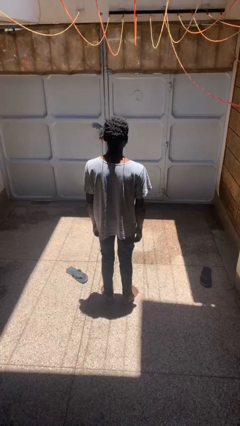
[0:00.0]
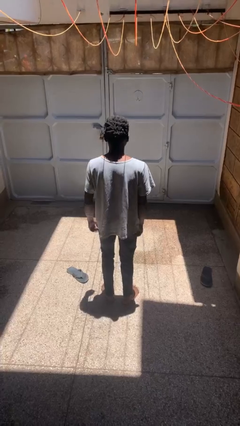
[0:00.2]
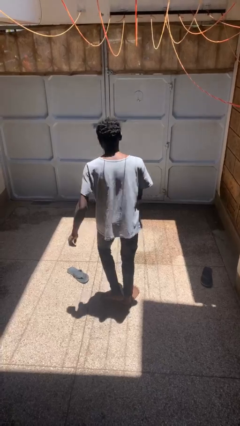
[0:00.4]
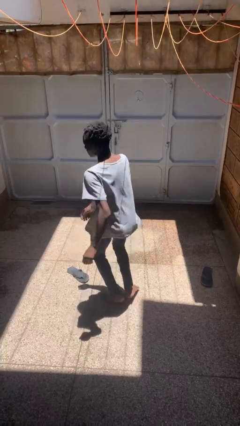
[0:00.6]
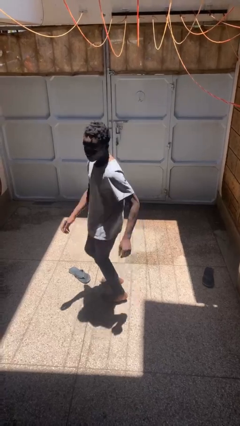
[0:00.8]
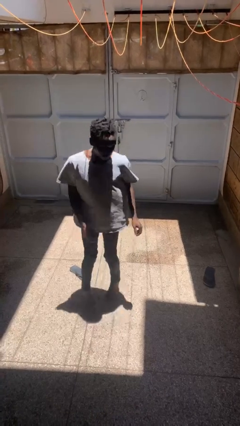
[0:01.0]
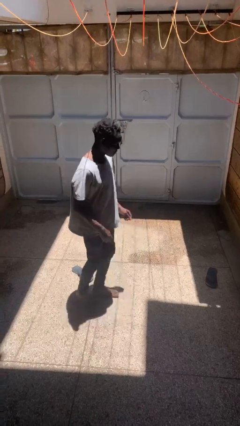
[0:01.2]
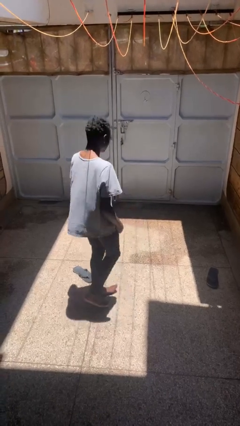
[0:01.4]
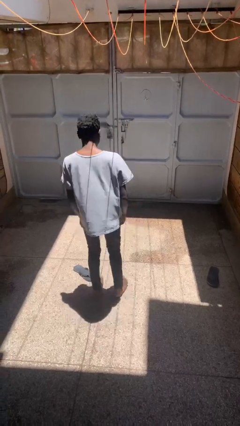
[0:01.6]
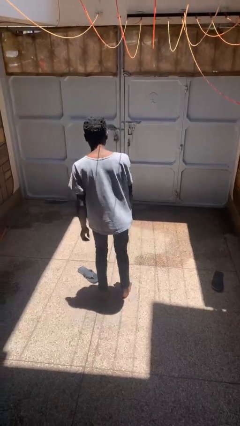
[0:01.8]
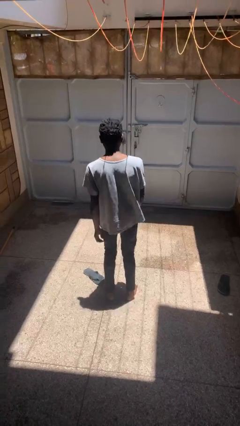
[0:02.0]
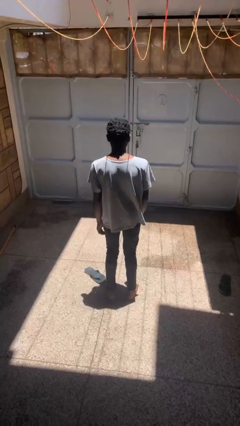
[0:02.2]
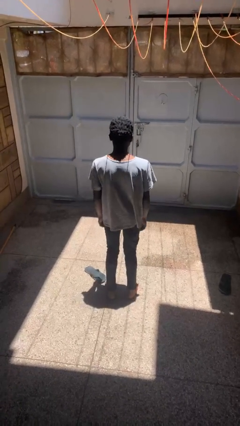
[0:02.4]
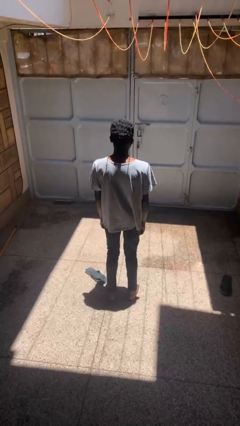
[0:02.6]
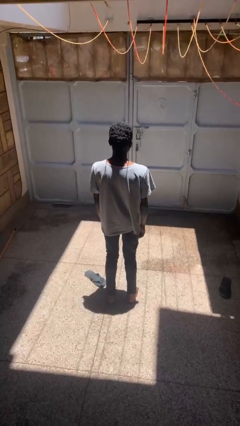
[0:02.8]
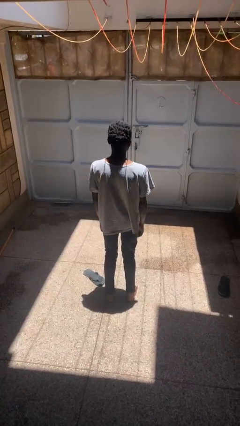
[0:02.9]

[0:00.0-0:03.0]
person twirls

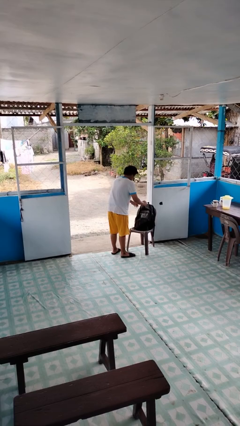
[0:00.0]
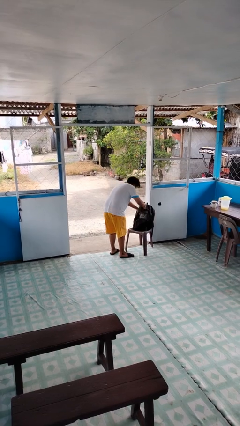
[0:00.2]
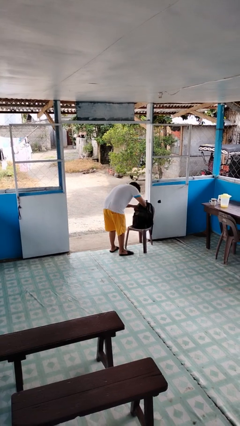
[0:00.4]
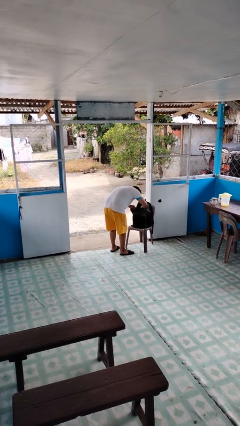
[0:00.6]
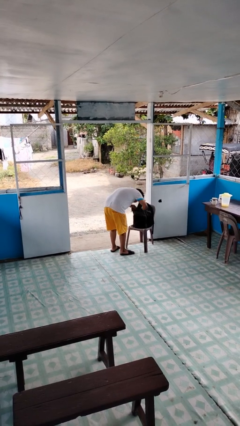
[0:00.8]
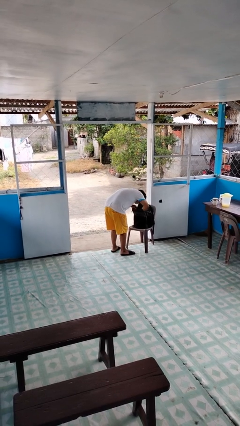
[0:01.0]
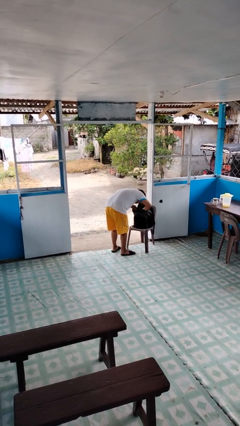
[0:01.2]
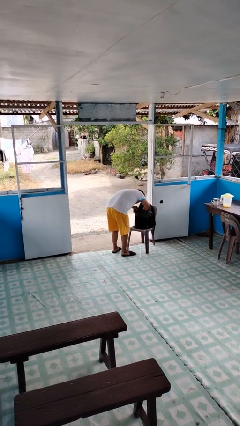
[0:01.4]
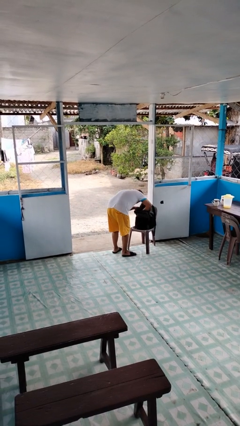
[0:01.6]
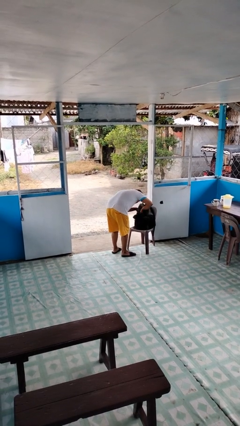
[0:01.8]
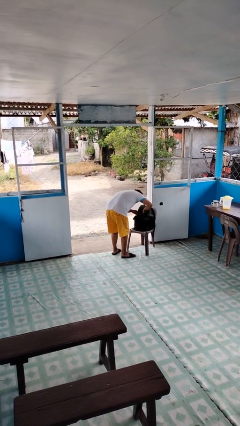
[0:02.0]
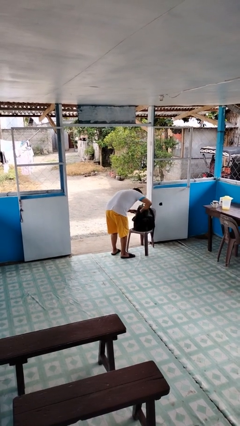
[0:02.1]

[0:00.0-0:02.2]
person searches in backpack

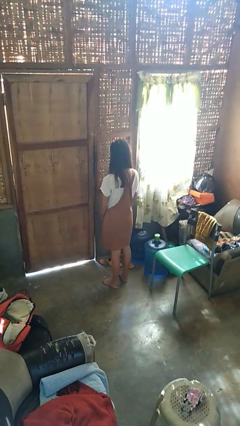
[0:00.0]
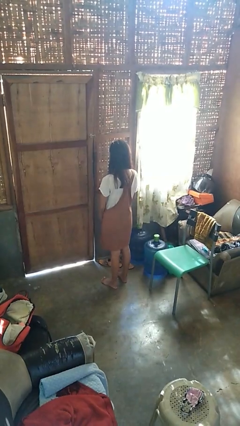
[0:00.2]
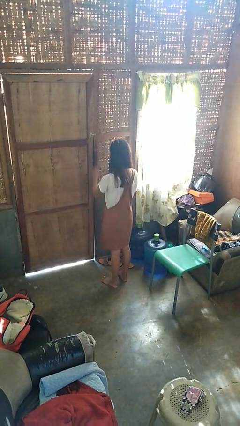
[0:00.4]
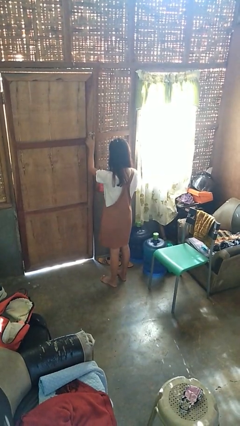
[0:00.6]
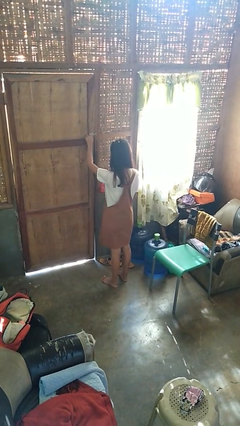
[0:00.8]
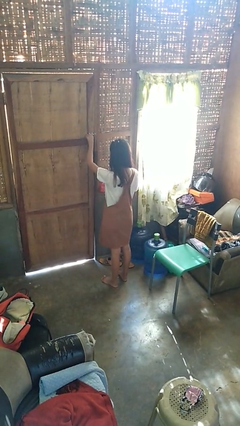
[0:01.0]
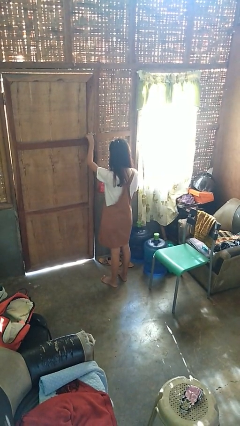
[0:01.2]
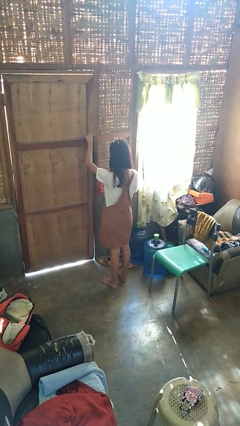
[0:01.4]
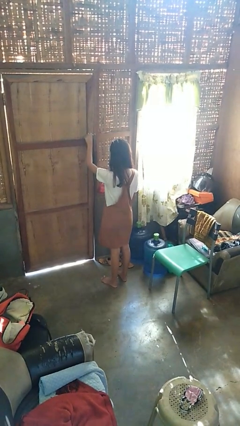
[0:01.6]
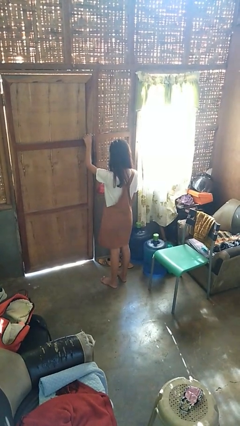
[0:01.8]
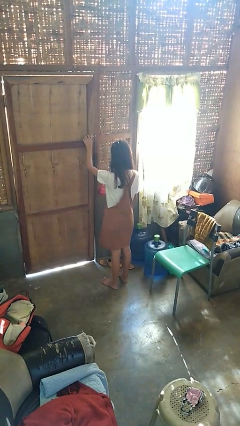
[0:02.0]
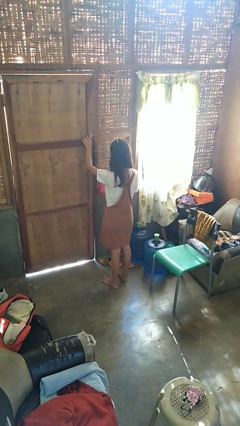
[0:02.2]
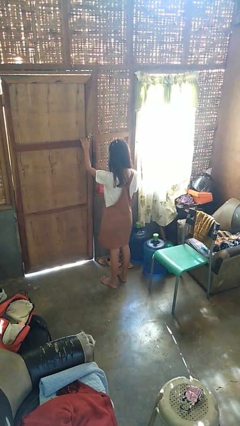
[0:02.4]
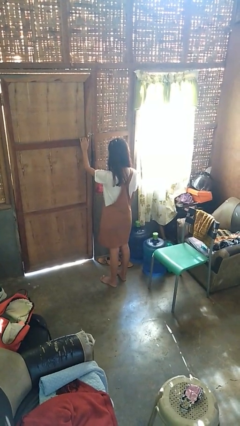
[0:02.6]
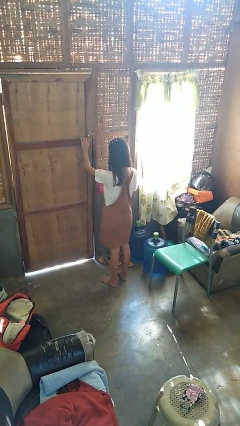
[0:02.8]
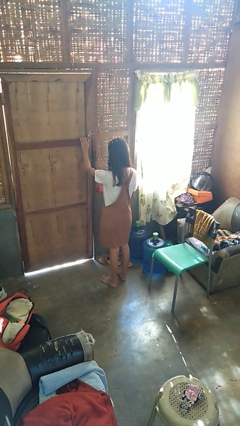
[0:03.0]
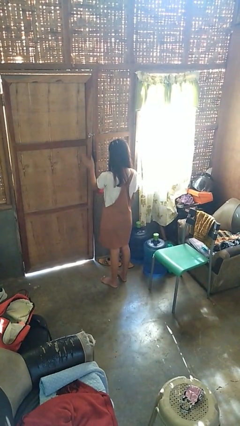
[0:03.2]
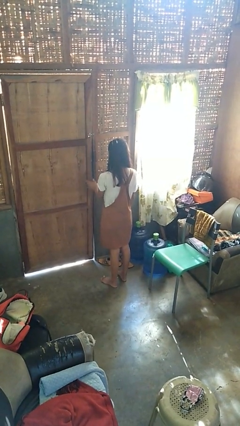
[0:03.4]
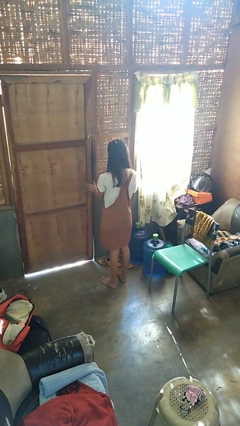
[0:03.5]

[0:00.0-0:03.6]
person unlocks door with keys

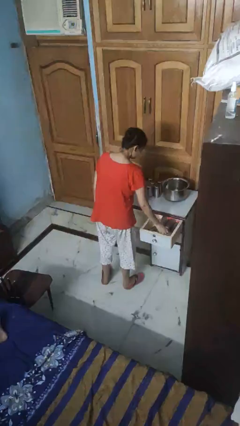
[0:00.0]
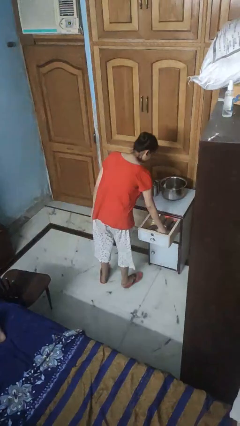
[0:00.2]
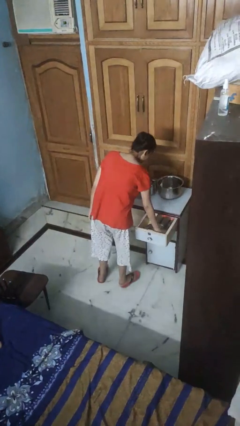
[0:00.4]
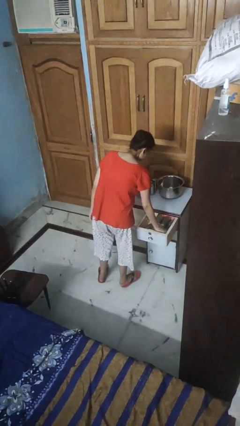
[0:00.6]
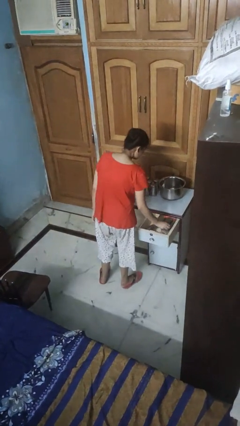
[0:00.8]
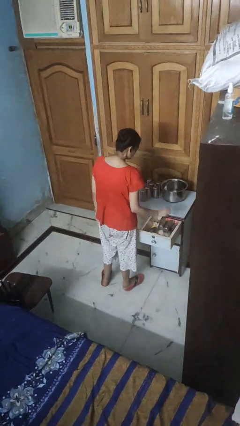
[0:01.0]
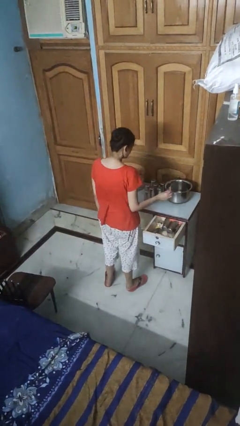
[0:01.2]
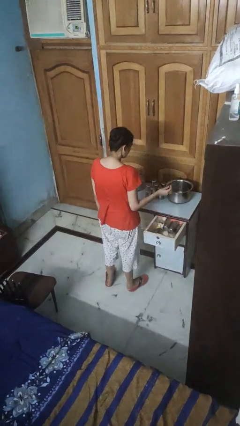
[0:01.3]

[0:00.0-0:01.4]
person takes object from kitchen drawer

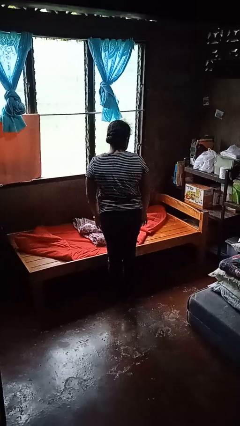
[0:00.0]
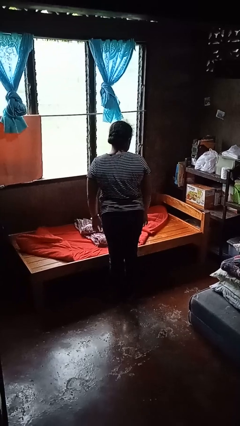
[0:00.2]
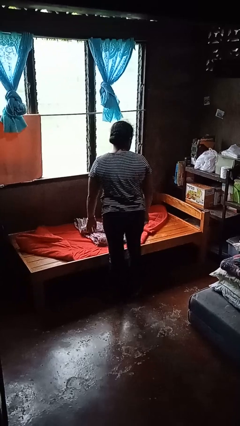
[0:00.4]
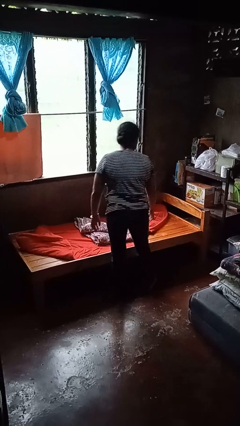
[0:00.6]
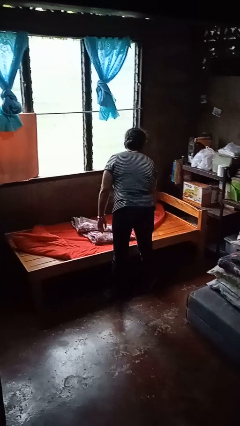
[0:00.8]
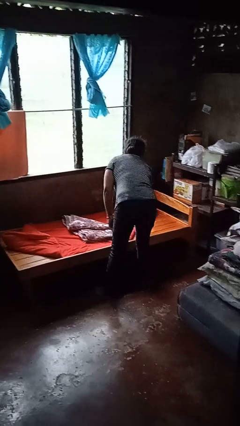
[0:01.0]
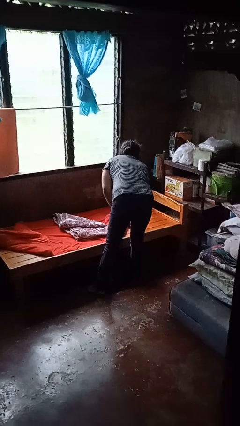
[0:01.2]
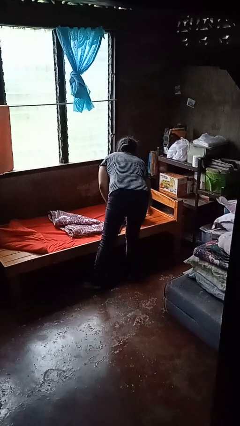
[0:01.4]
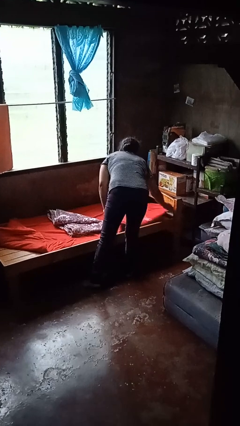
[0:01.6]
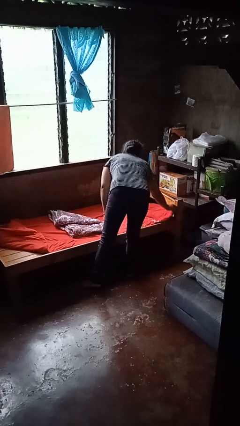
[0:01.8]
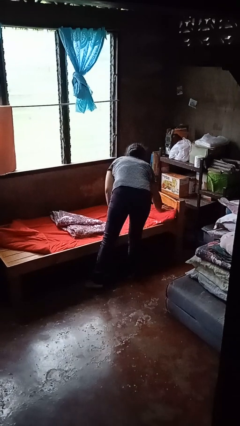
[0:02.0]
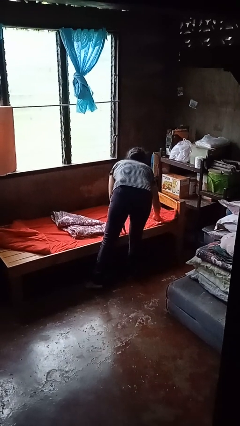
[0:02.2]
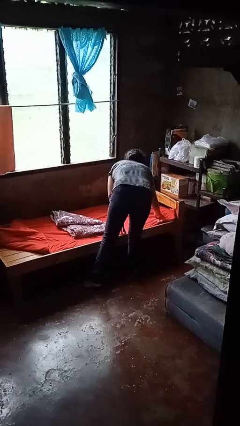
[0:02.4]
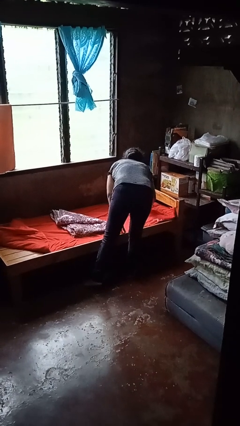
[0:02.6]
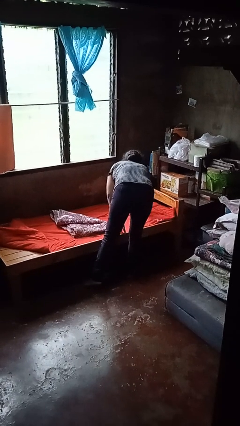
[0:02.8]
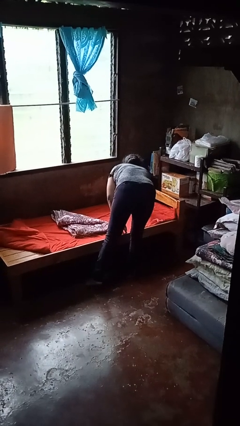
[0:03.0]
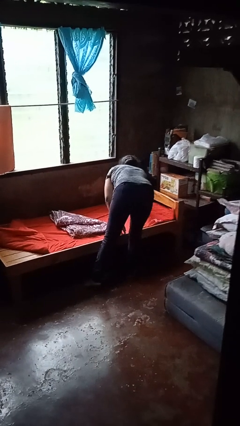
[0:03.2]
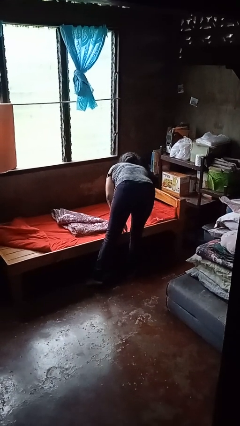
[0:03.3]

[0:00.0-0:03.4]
person makes bed

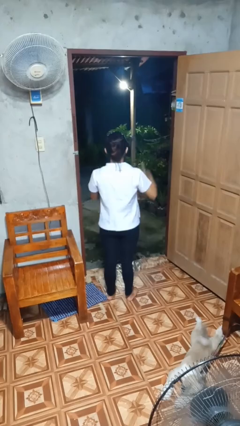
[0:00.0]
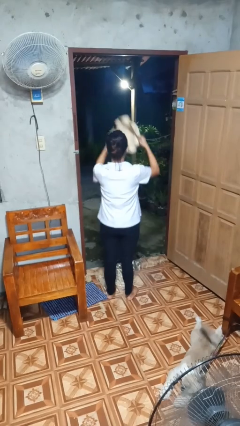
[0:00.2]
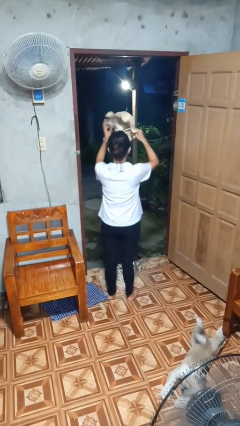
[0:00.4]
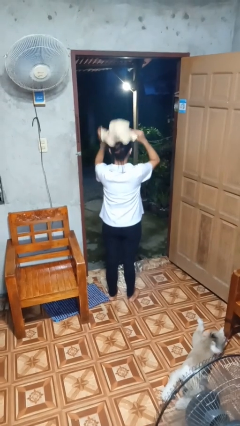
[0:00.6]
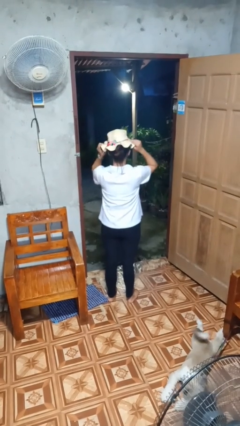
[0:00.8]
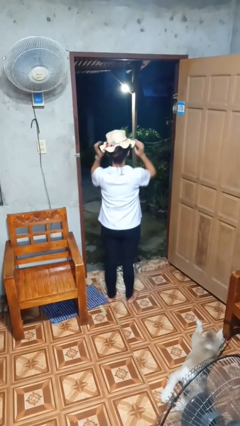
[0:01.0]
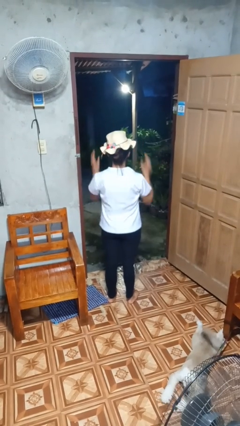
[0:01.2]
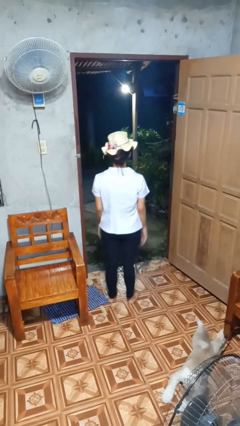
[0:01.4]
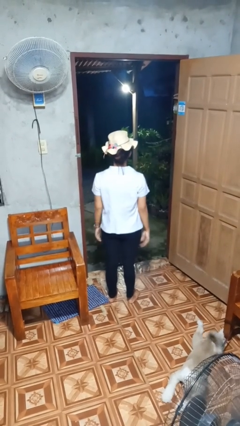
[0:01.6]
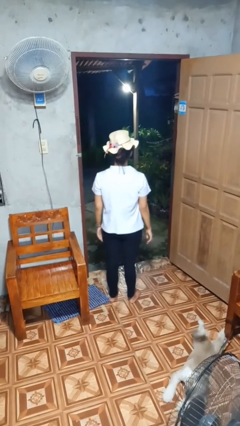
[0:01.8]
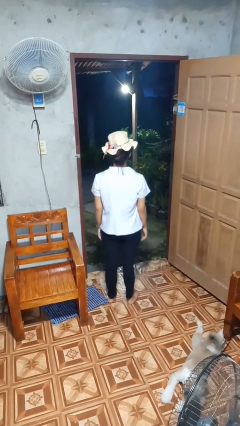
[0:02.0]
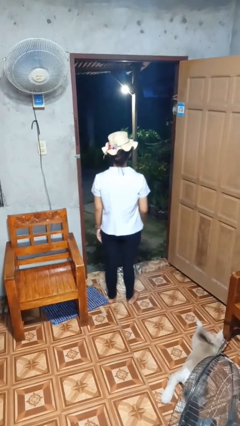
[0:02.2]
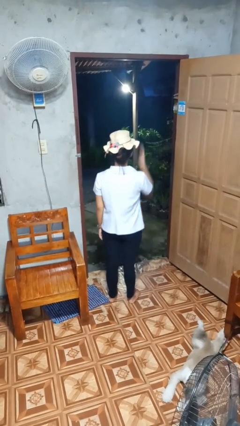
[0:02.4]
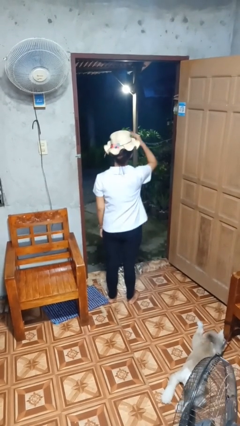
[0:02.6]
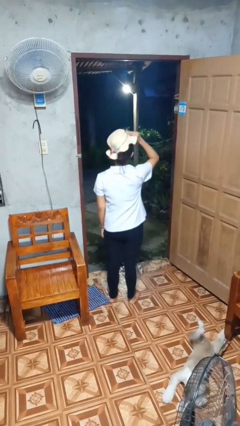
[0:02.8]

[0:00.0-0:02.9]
person puts on hat

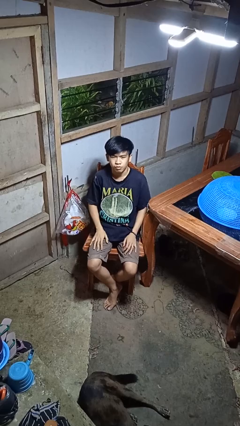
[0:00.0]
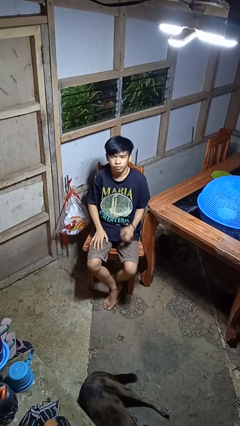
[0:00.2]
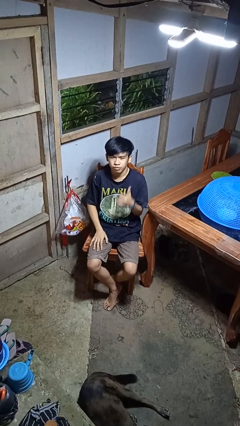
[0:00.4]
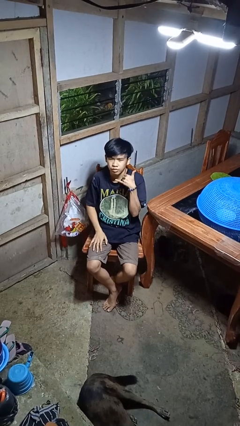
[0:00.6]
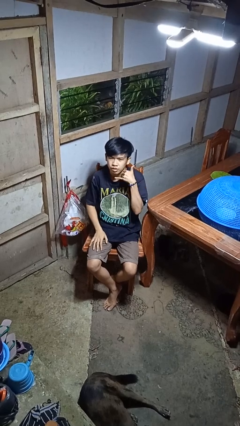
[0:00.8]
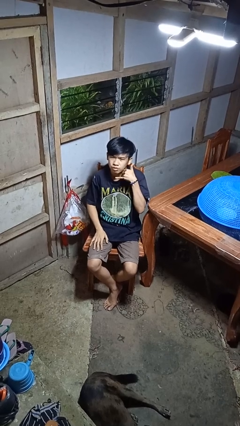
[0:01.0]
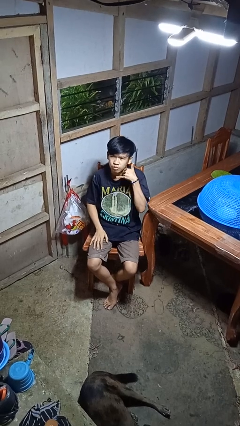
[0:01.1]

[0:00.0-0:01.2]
person gestures call me
